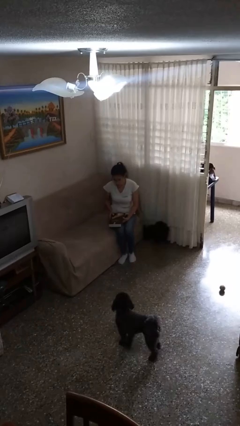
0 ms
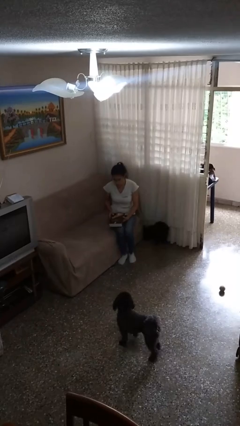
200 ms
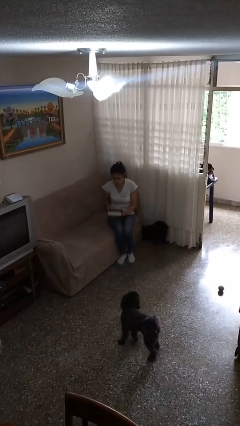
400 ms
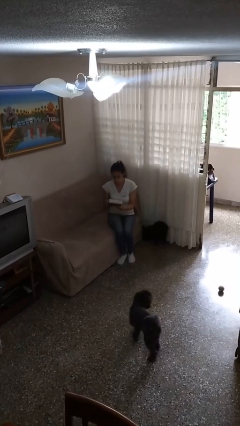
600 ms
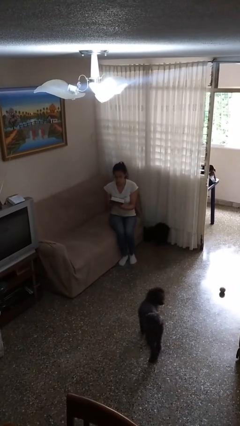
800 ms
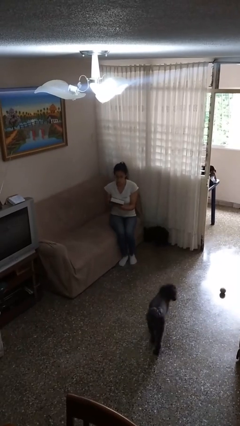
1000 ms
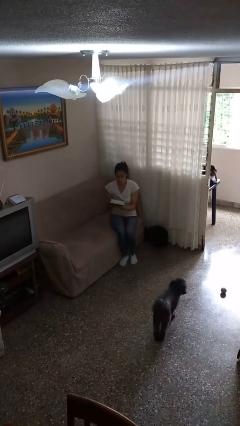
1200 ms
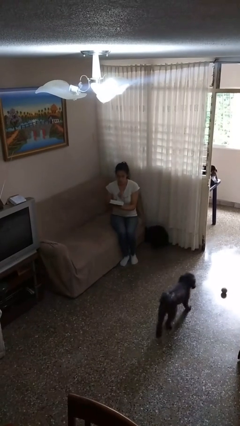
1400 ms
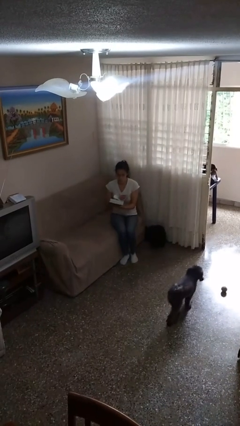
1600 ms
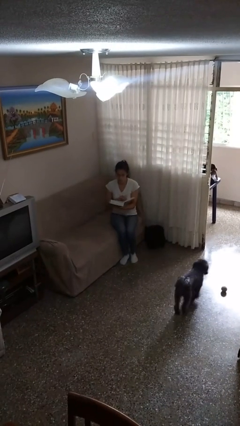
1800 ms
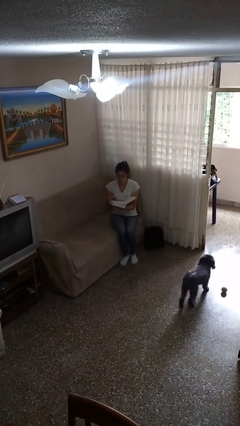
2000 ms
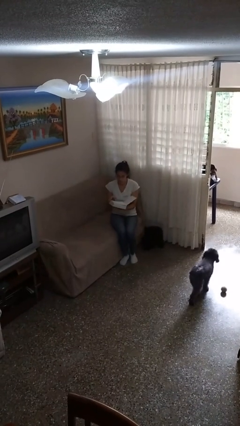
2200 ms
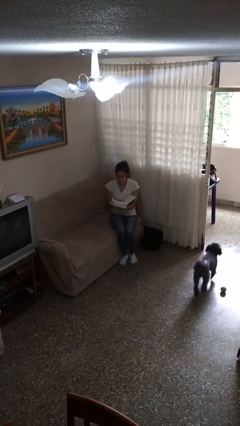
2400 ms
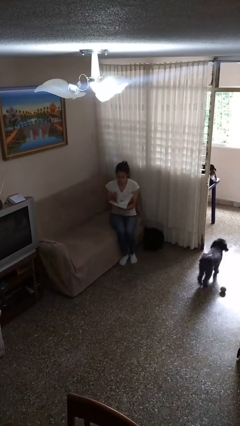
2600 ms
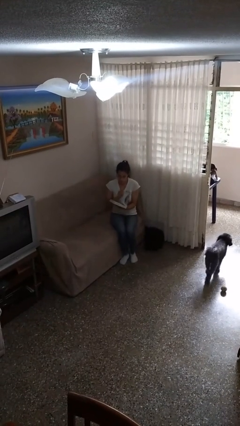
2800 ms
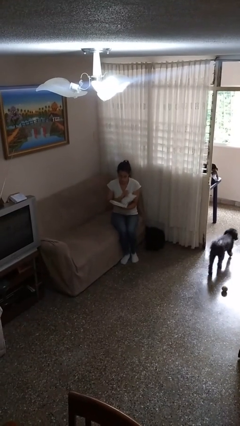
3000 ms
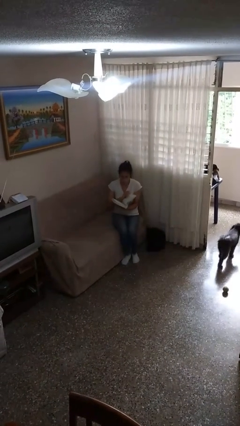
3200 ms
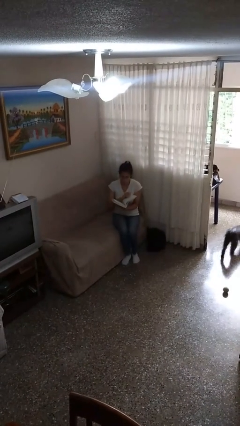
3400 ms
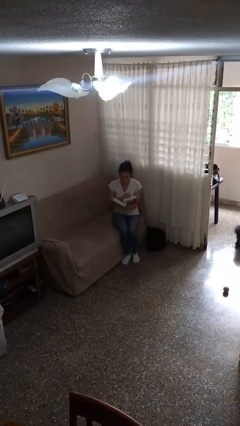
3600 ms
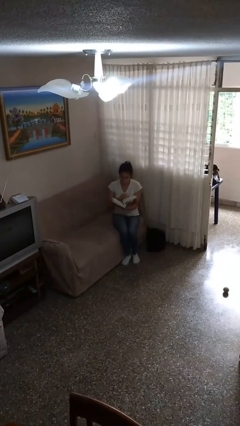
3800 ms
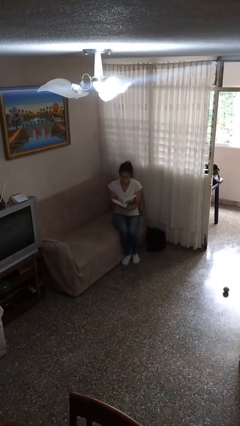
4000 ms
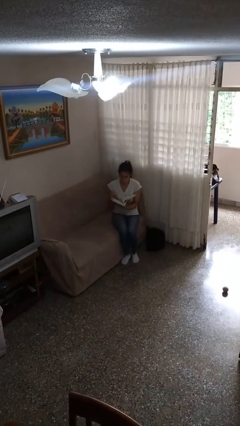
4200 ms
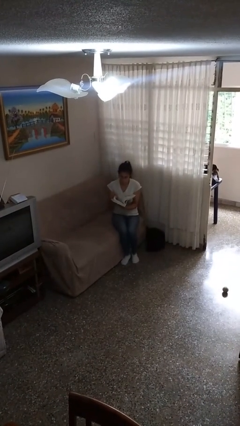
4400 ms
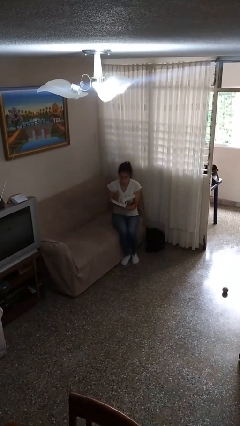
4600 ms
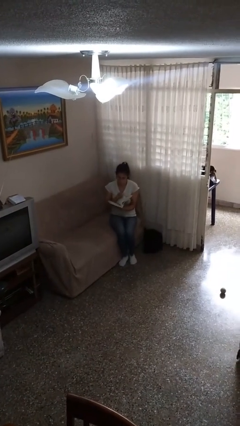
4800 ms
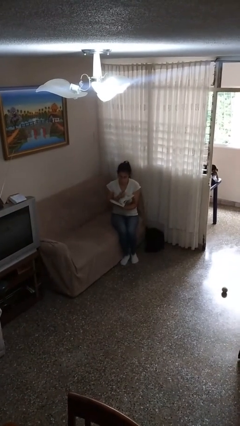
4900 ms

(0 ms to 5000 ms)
person reads book

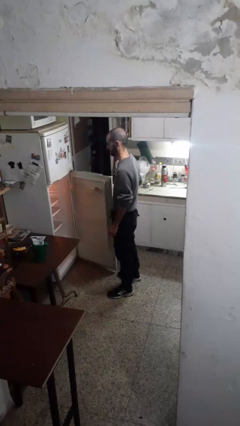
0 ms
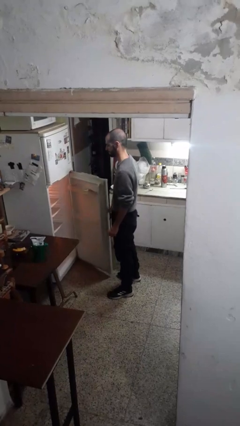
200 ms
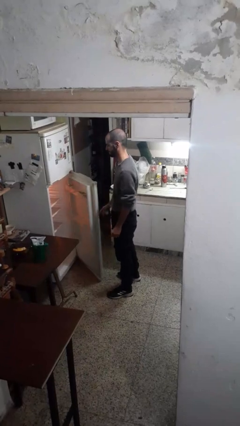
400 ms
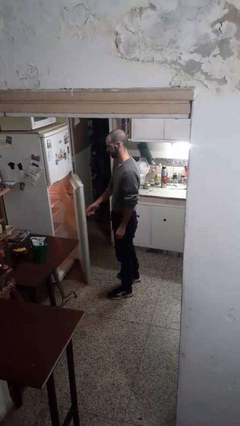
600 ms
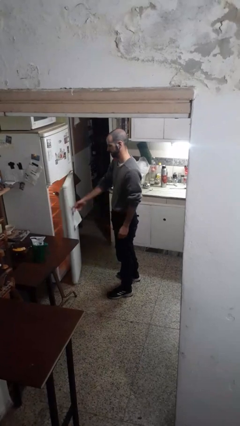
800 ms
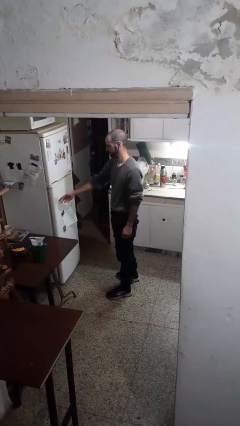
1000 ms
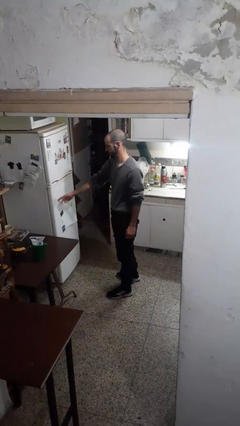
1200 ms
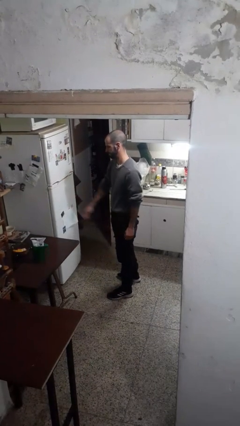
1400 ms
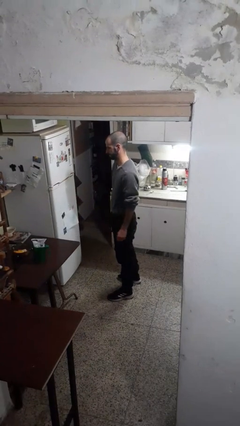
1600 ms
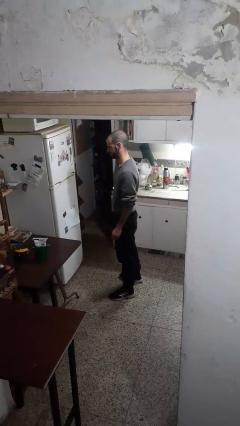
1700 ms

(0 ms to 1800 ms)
person closes refrigerator

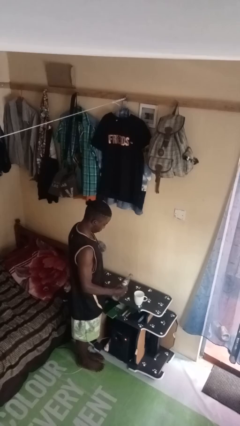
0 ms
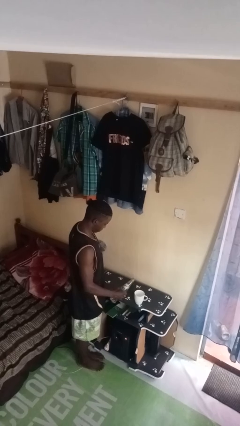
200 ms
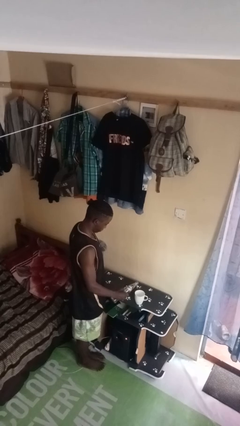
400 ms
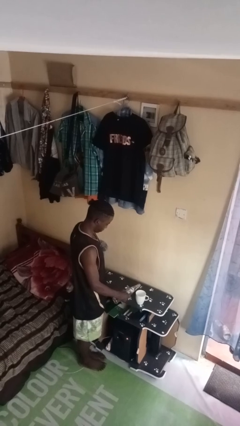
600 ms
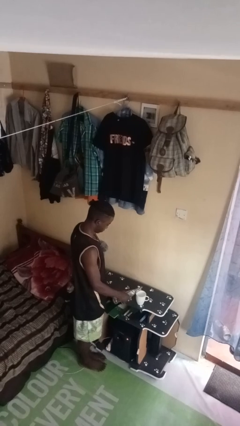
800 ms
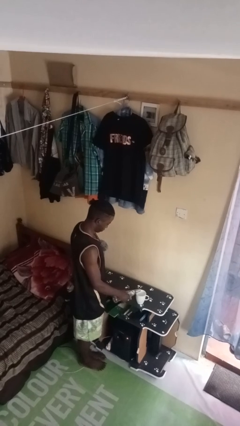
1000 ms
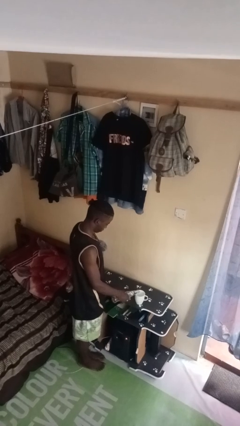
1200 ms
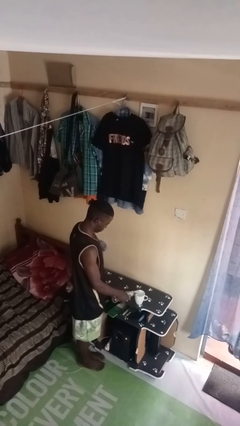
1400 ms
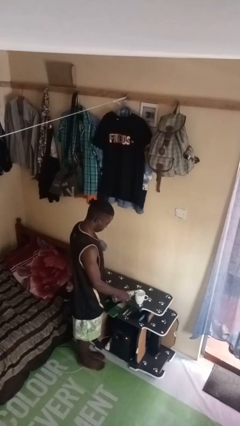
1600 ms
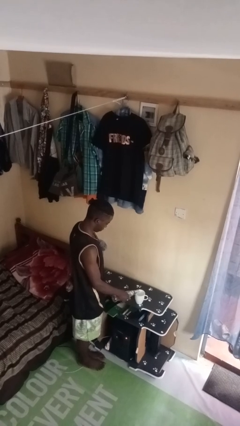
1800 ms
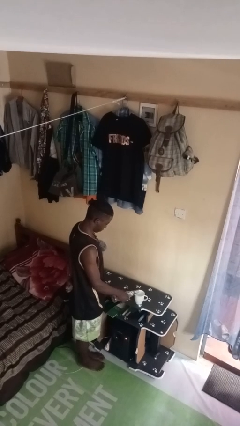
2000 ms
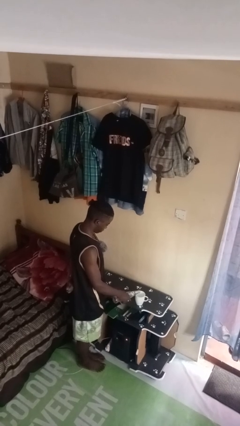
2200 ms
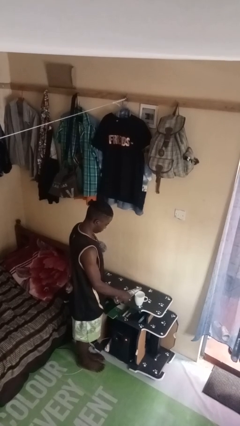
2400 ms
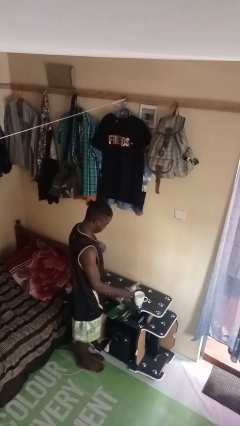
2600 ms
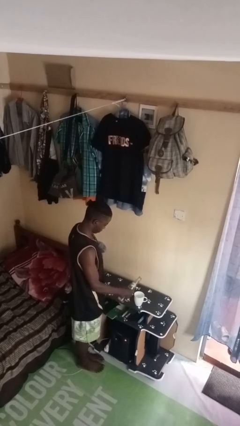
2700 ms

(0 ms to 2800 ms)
person pours liquid into cup

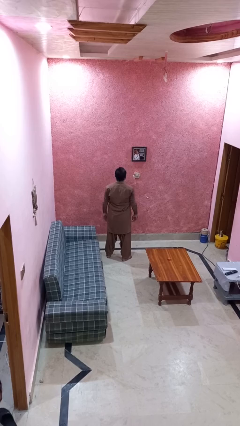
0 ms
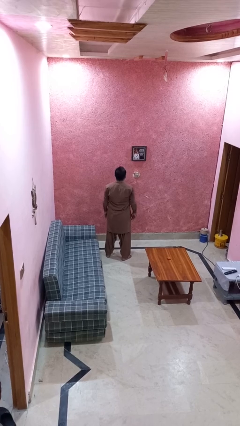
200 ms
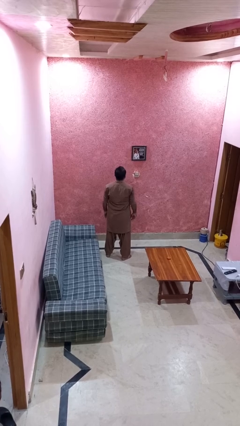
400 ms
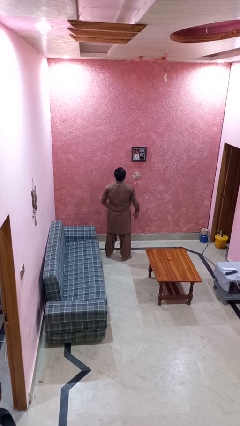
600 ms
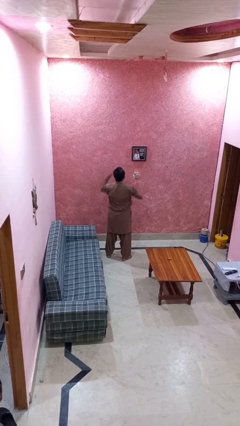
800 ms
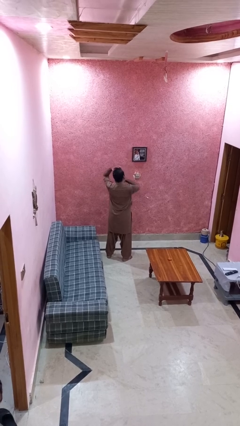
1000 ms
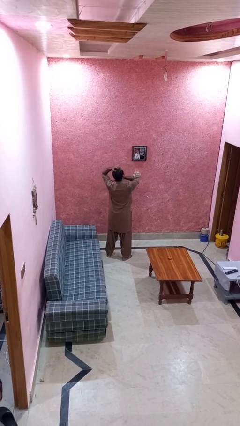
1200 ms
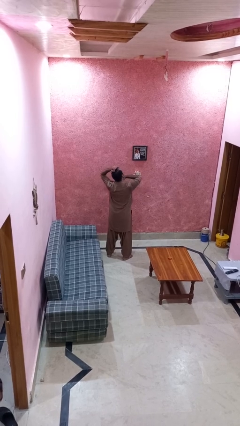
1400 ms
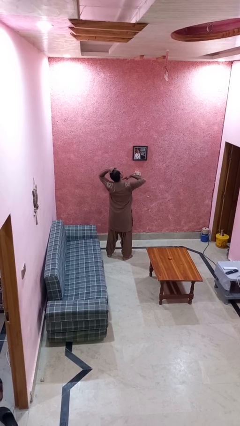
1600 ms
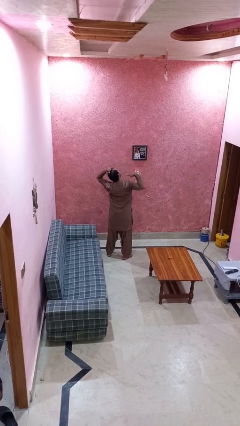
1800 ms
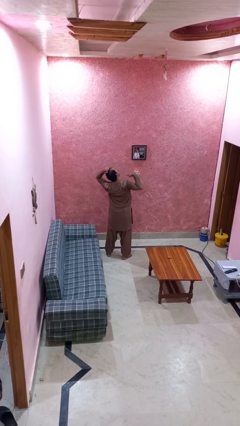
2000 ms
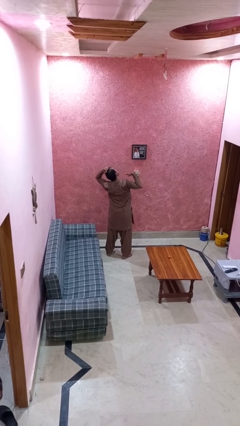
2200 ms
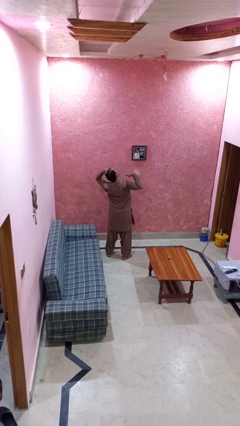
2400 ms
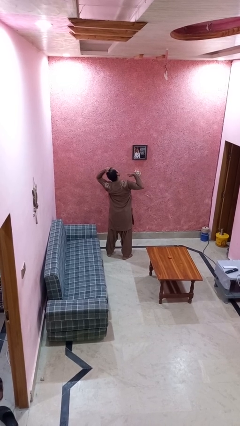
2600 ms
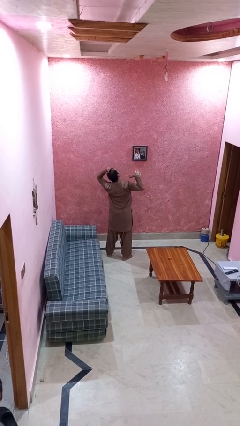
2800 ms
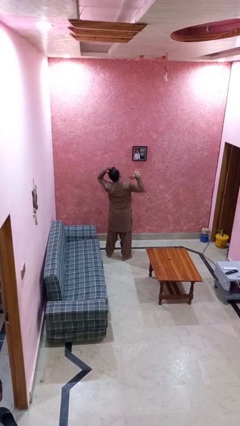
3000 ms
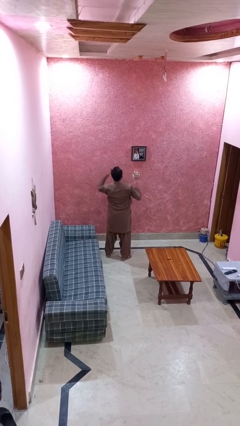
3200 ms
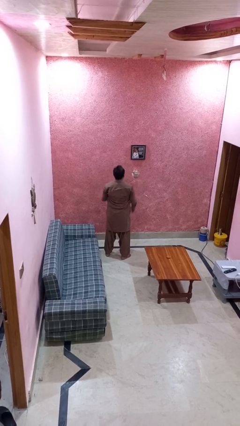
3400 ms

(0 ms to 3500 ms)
person gestures cut

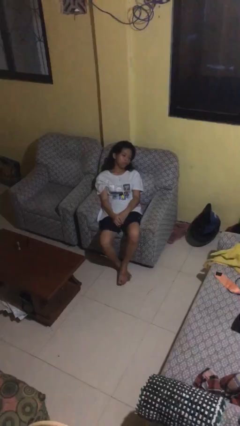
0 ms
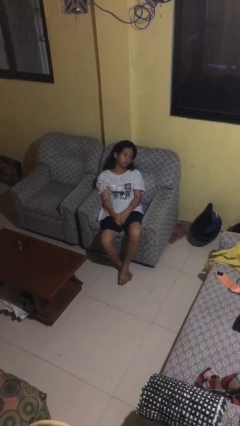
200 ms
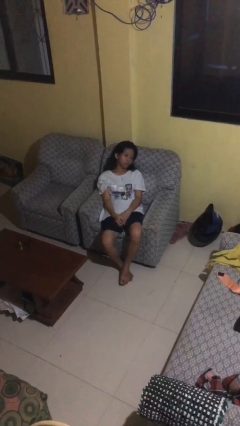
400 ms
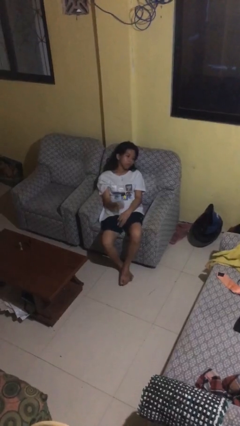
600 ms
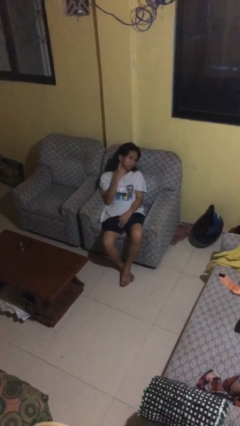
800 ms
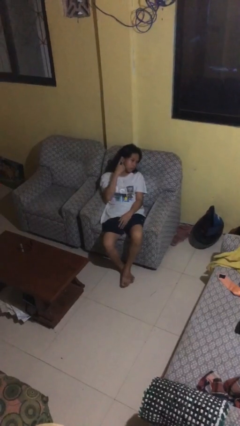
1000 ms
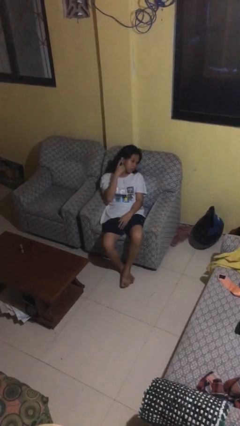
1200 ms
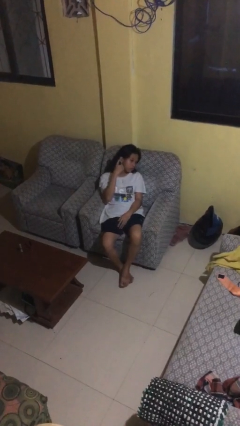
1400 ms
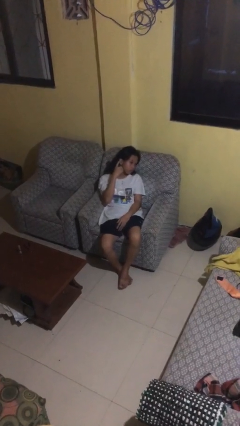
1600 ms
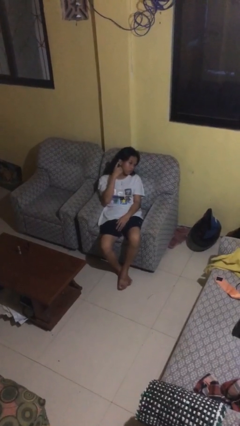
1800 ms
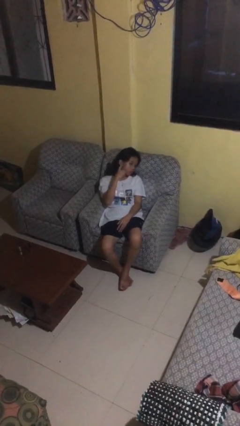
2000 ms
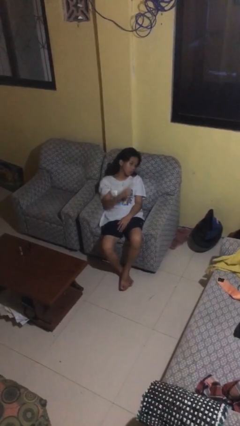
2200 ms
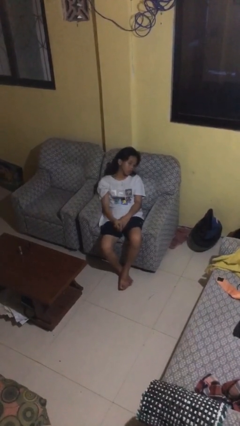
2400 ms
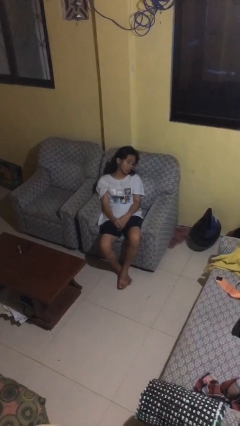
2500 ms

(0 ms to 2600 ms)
person gestures listen closely

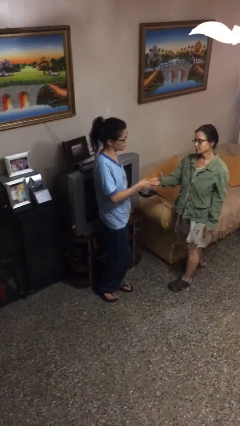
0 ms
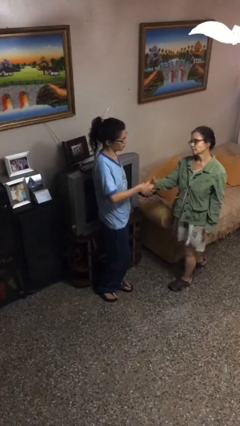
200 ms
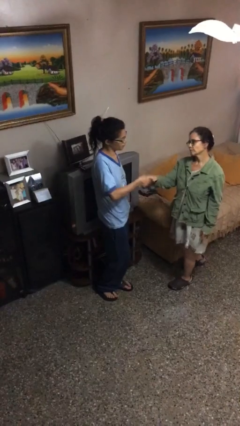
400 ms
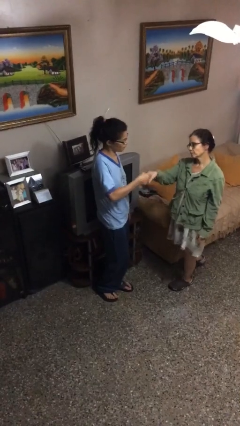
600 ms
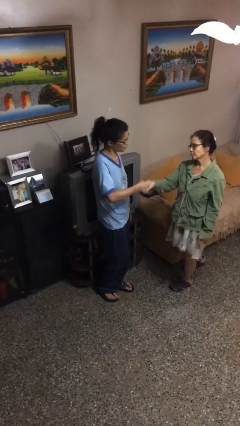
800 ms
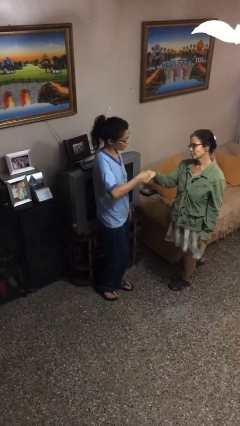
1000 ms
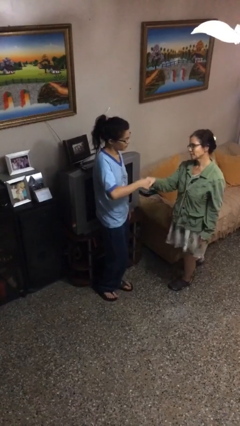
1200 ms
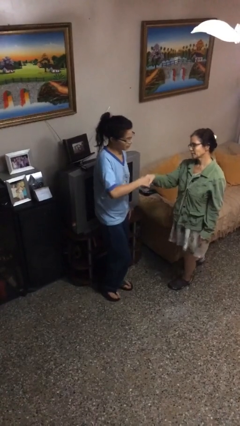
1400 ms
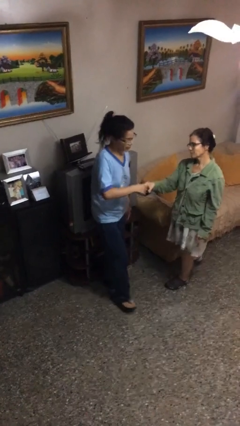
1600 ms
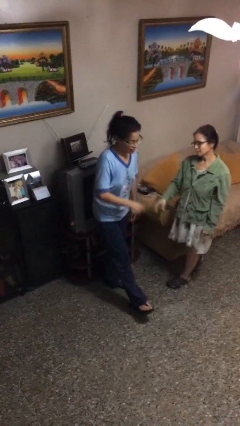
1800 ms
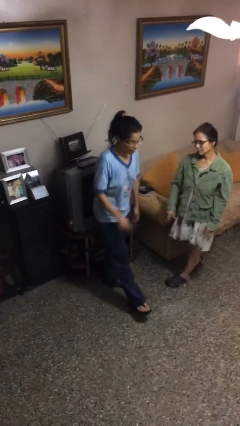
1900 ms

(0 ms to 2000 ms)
person shakes hand
